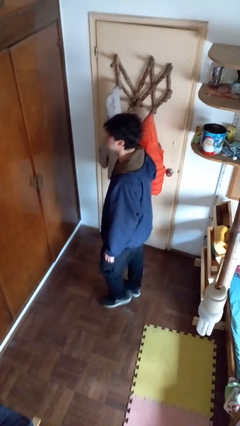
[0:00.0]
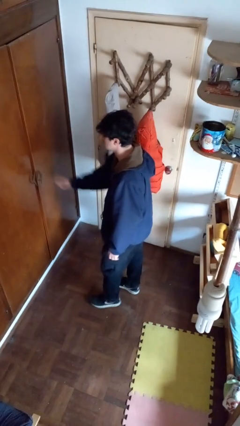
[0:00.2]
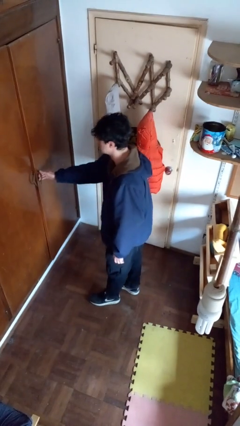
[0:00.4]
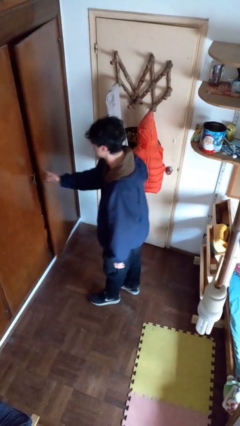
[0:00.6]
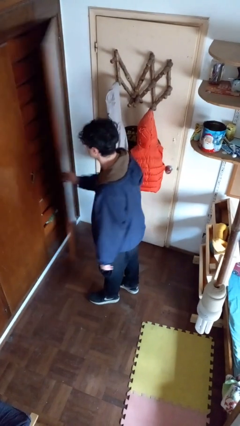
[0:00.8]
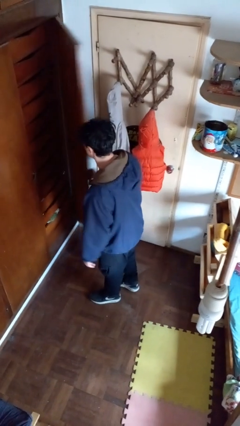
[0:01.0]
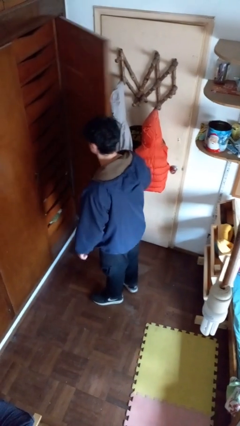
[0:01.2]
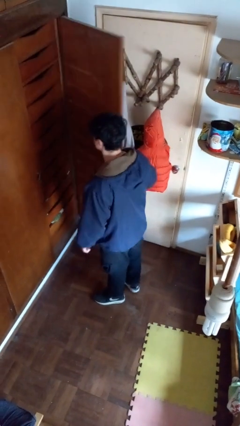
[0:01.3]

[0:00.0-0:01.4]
person opens closet door

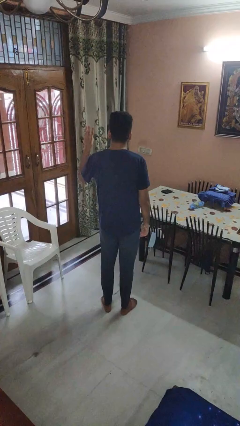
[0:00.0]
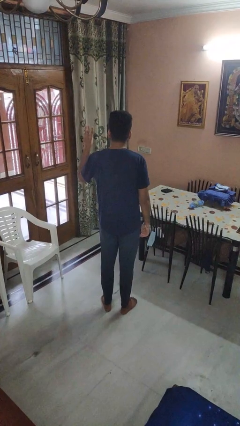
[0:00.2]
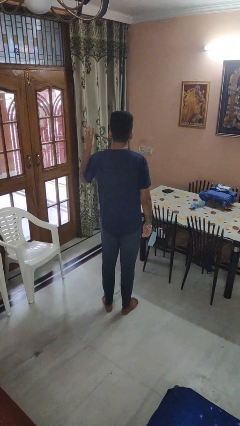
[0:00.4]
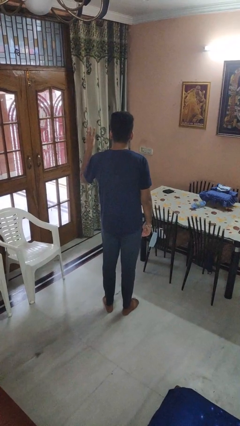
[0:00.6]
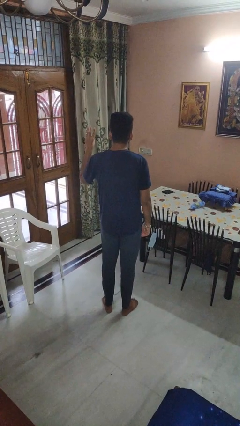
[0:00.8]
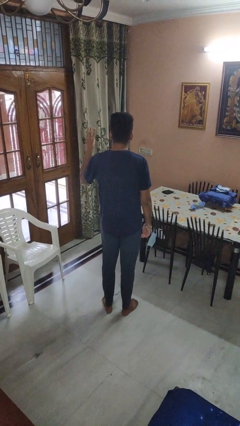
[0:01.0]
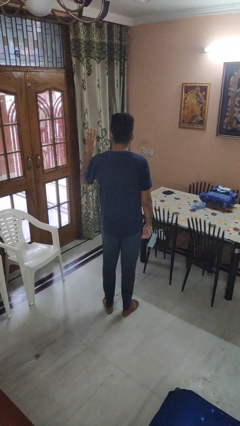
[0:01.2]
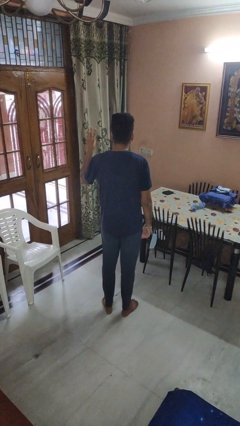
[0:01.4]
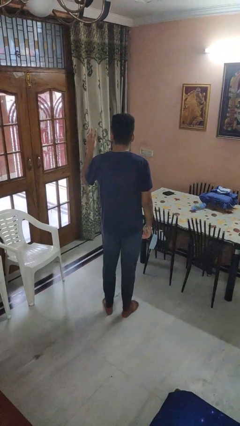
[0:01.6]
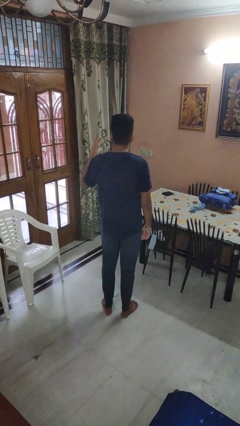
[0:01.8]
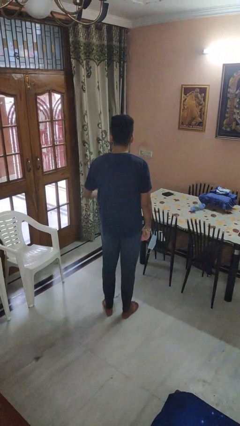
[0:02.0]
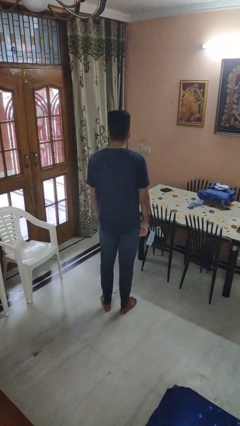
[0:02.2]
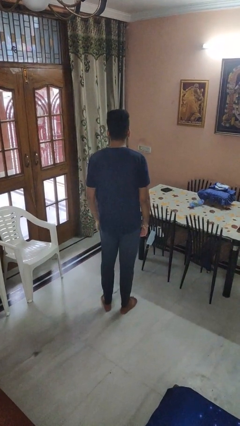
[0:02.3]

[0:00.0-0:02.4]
person gestures number three

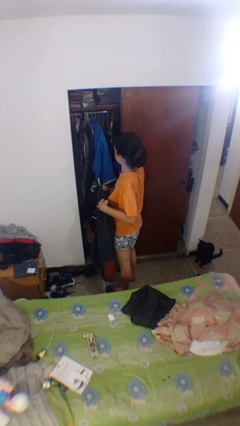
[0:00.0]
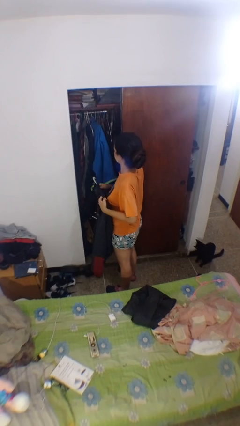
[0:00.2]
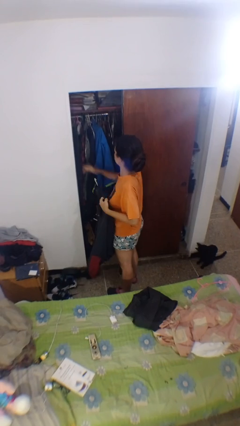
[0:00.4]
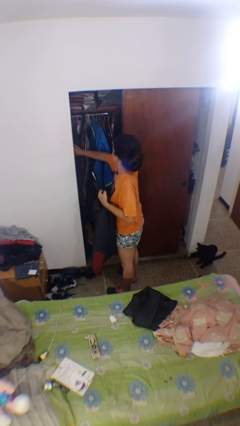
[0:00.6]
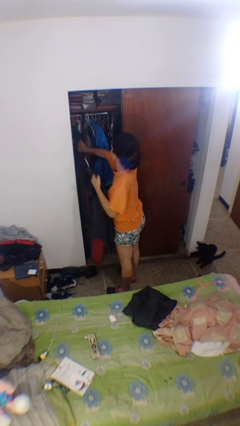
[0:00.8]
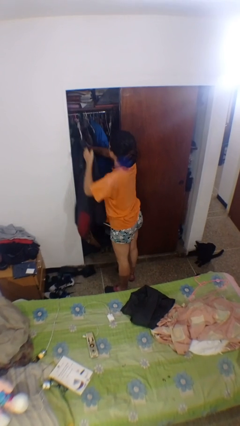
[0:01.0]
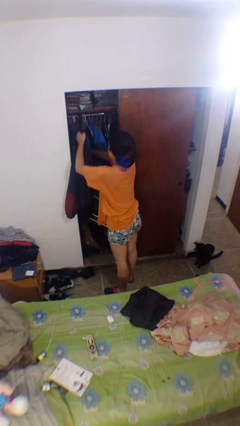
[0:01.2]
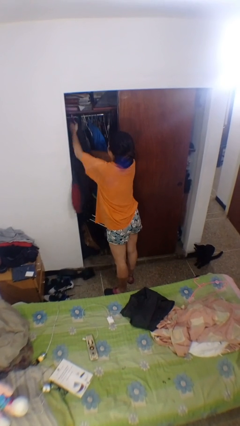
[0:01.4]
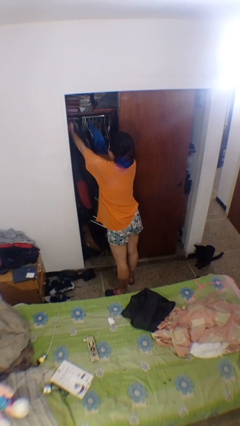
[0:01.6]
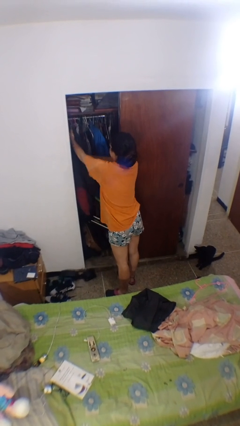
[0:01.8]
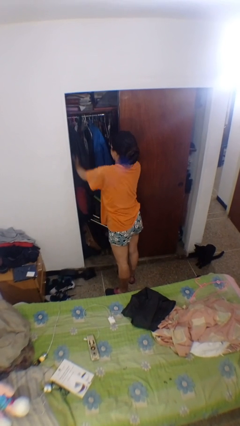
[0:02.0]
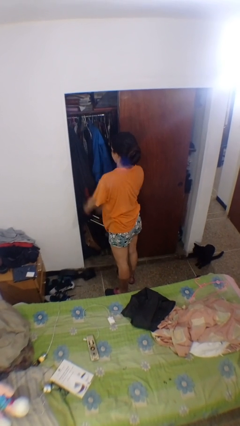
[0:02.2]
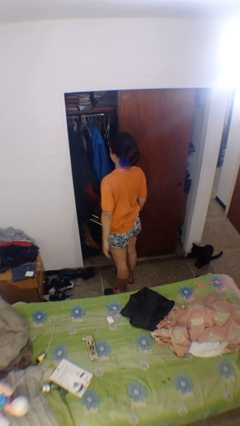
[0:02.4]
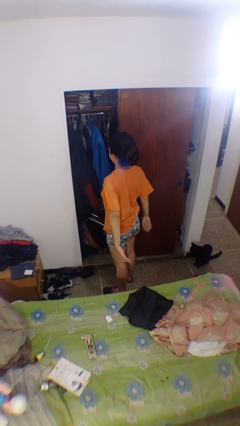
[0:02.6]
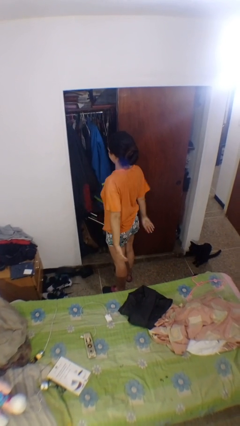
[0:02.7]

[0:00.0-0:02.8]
person puts clothes into closet

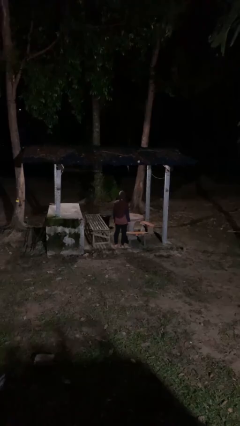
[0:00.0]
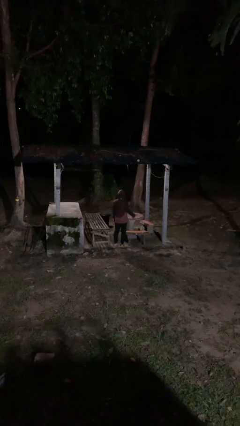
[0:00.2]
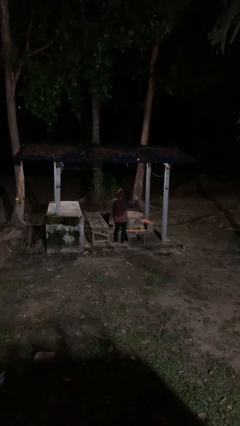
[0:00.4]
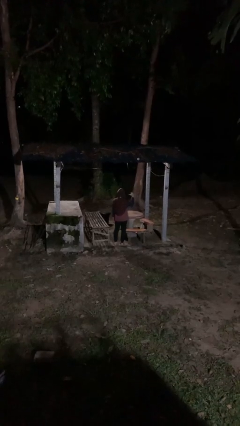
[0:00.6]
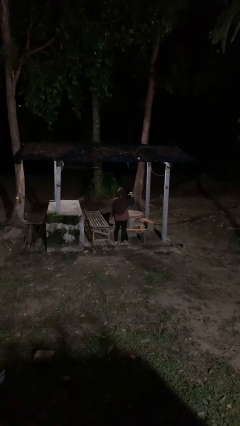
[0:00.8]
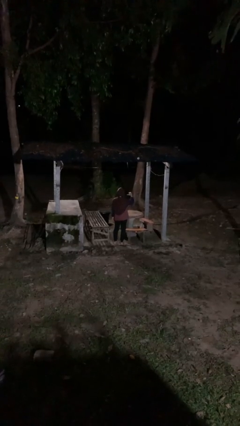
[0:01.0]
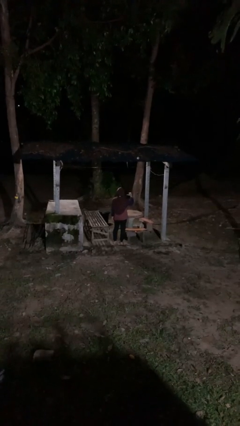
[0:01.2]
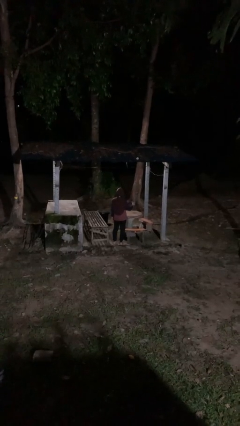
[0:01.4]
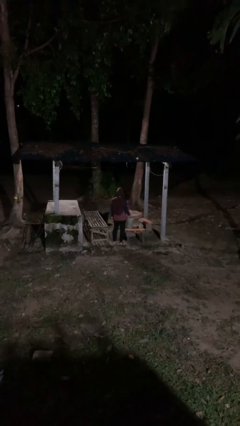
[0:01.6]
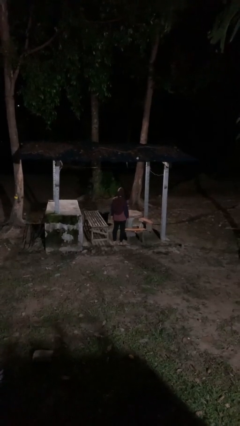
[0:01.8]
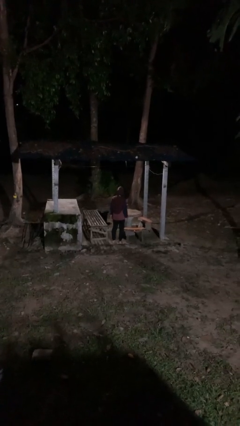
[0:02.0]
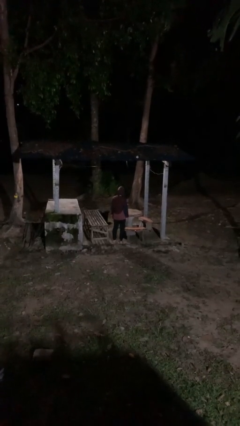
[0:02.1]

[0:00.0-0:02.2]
person gestures behind me

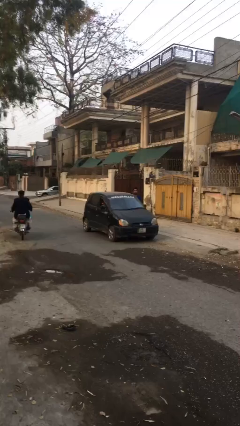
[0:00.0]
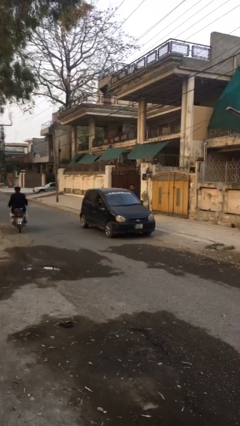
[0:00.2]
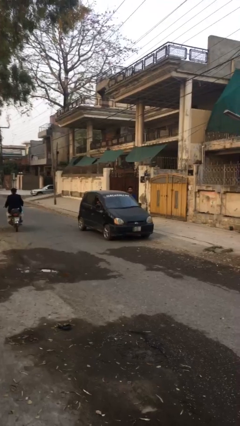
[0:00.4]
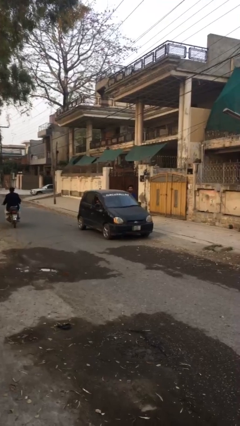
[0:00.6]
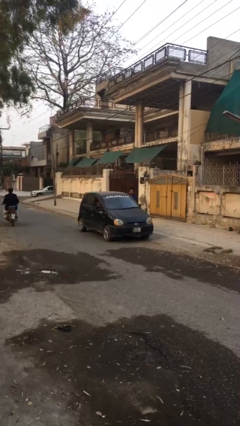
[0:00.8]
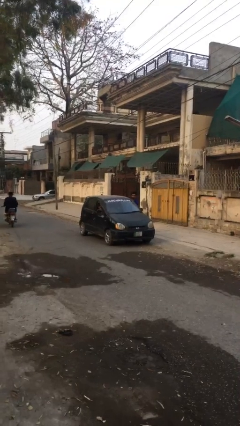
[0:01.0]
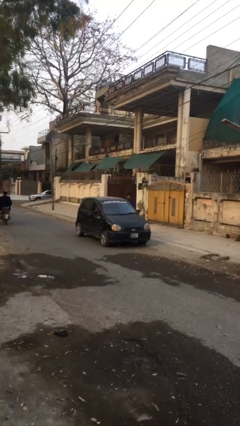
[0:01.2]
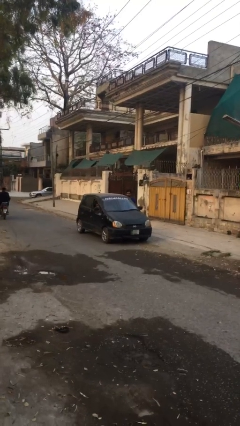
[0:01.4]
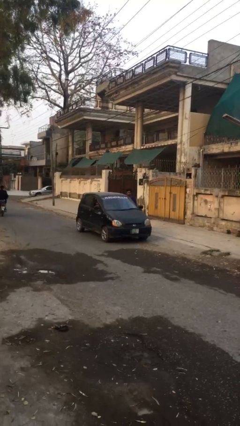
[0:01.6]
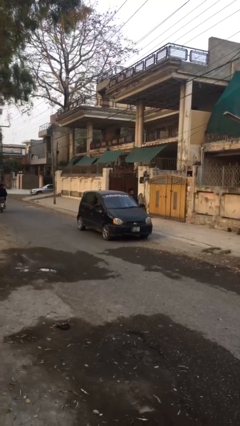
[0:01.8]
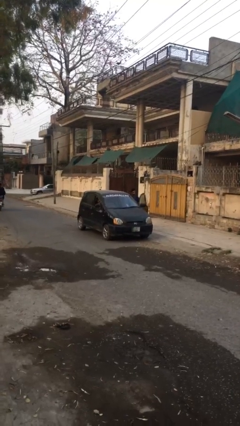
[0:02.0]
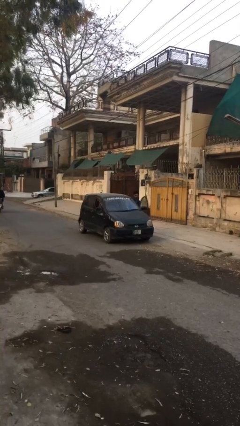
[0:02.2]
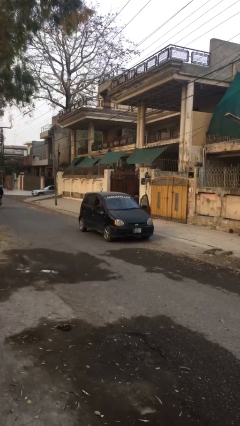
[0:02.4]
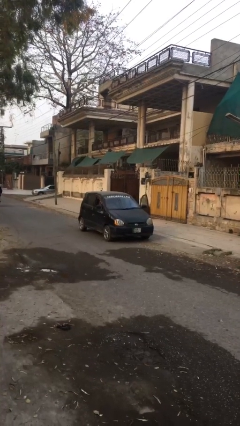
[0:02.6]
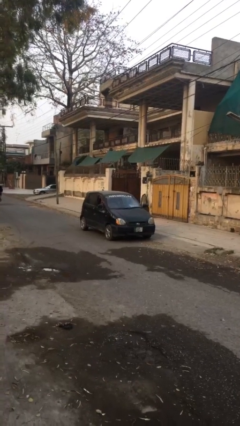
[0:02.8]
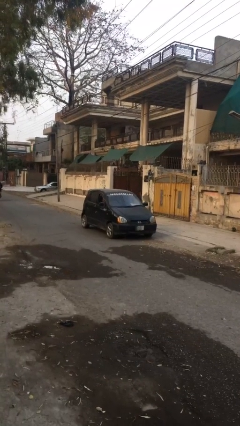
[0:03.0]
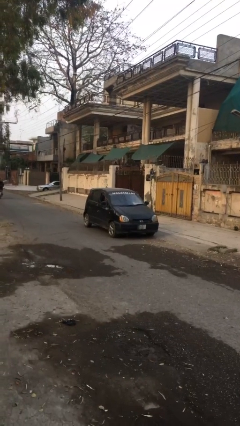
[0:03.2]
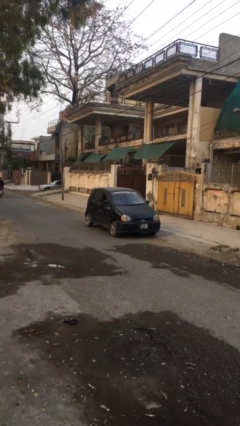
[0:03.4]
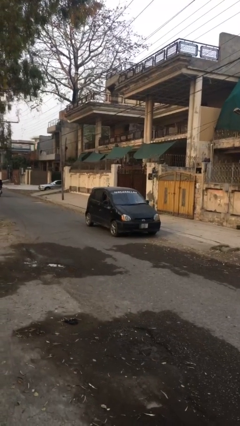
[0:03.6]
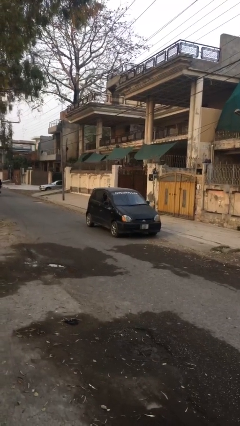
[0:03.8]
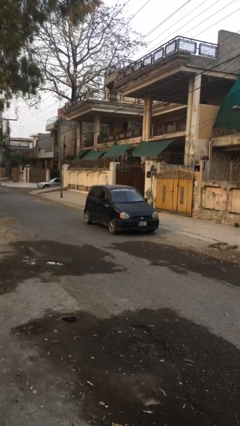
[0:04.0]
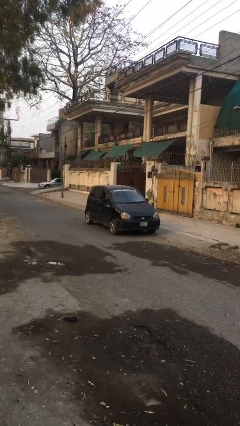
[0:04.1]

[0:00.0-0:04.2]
car picks up person

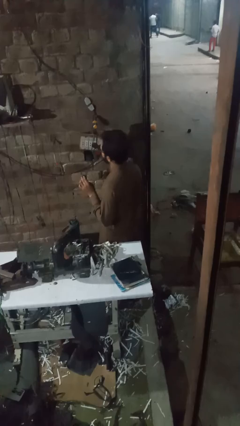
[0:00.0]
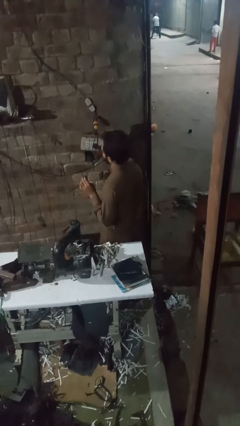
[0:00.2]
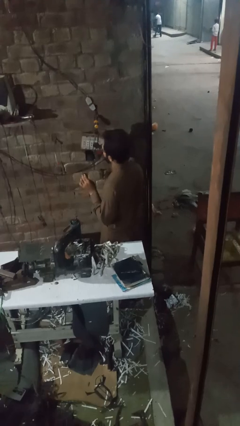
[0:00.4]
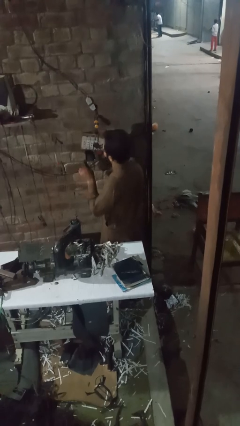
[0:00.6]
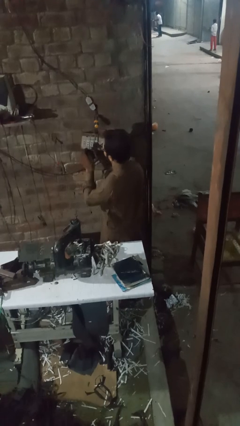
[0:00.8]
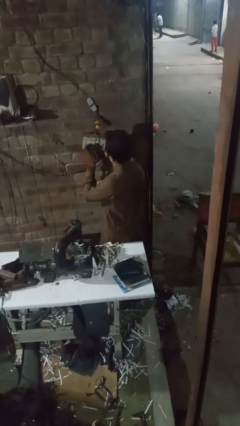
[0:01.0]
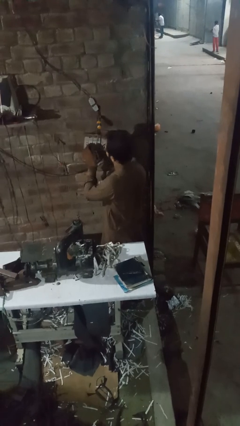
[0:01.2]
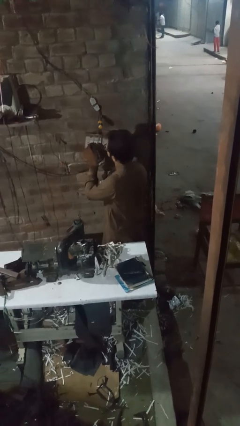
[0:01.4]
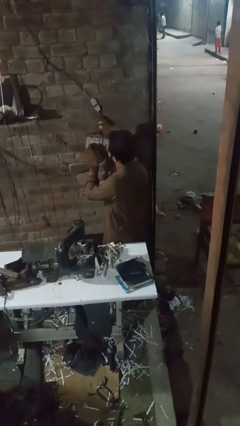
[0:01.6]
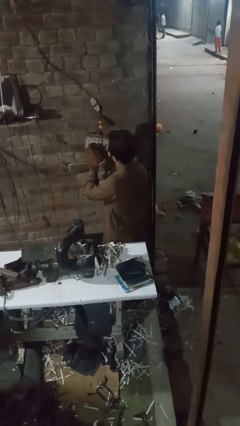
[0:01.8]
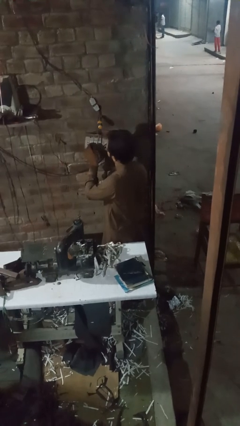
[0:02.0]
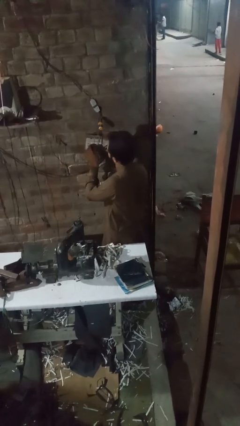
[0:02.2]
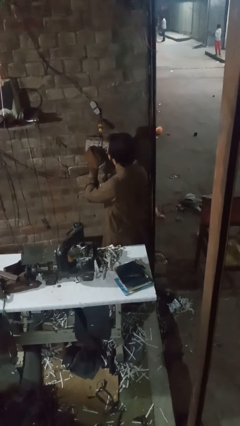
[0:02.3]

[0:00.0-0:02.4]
person plugs into electrical socket

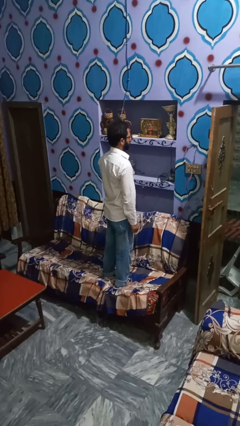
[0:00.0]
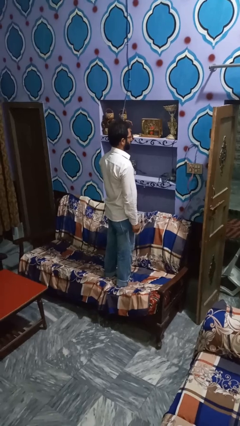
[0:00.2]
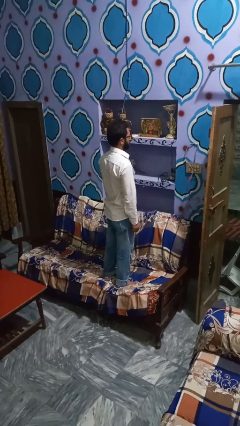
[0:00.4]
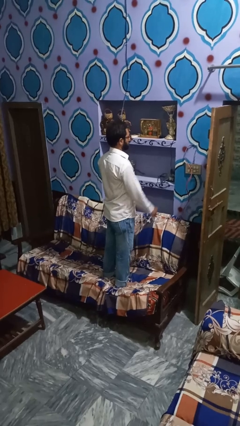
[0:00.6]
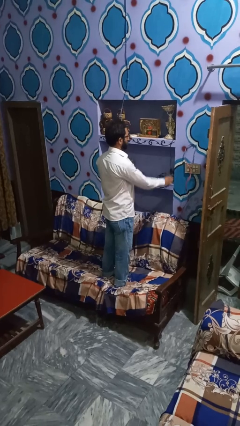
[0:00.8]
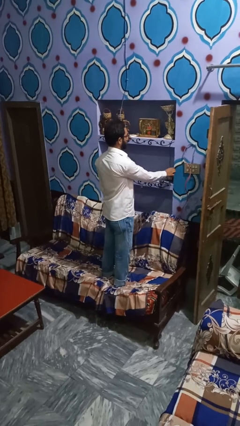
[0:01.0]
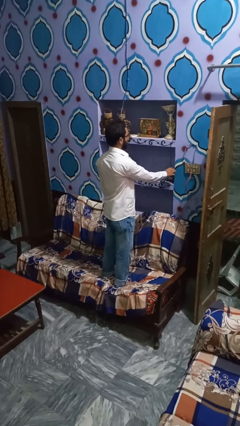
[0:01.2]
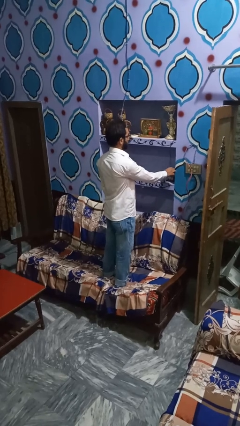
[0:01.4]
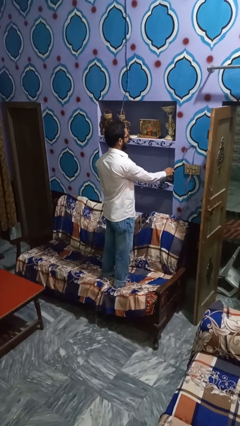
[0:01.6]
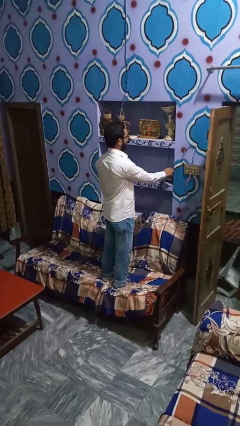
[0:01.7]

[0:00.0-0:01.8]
person turns on lamp
